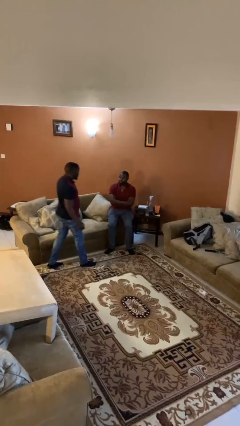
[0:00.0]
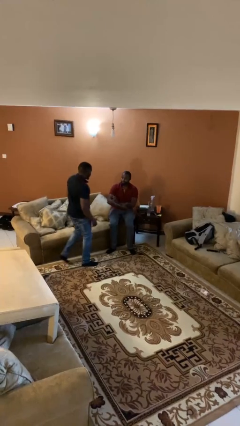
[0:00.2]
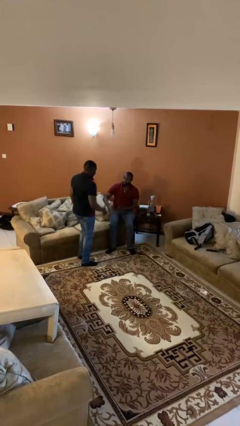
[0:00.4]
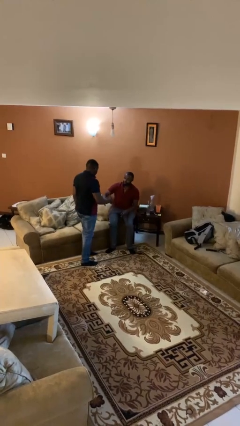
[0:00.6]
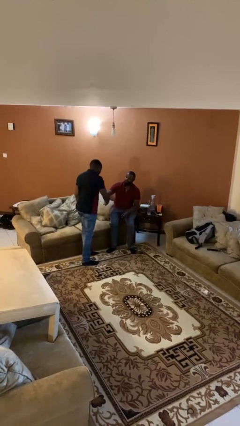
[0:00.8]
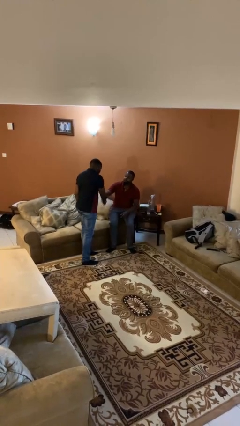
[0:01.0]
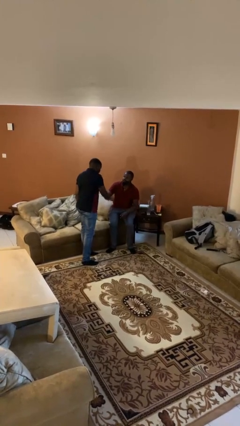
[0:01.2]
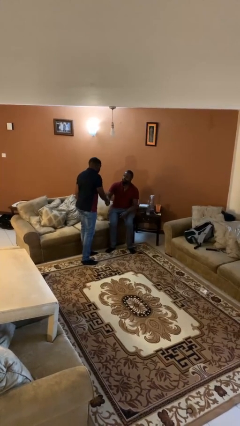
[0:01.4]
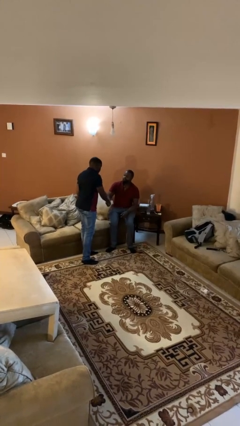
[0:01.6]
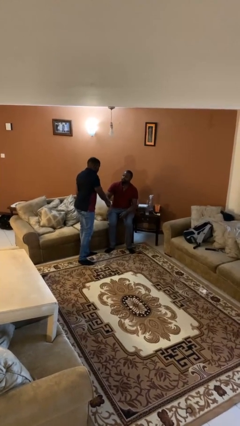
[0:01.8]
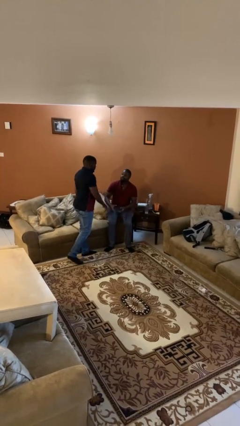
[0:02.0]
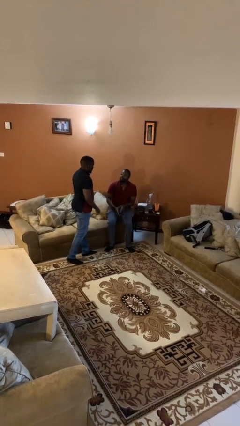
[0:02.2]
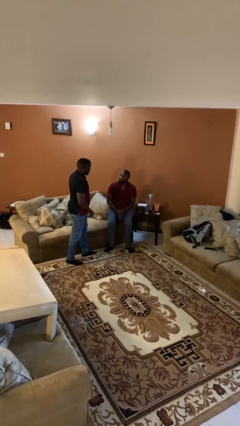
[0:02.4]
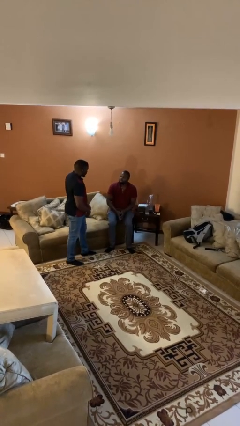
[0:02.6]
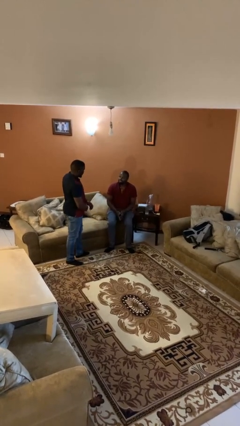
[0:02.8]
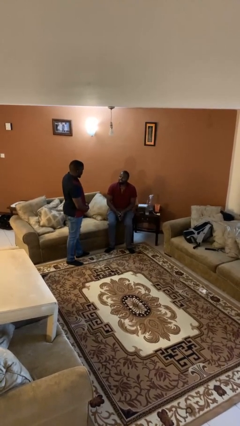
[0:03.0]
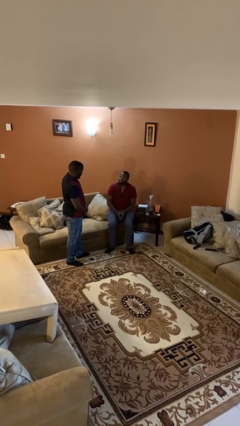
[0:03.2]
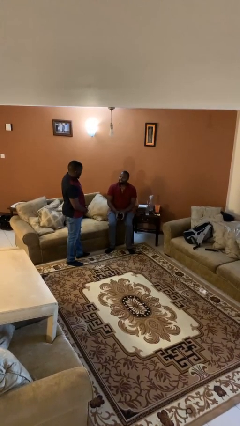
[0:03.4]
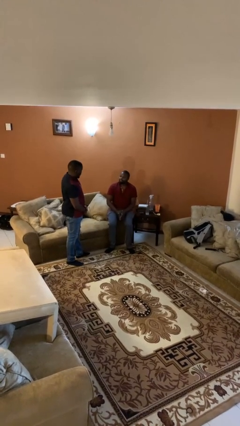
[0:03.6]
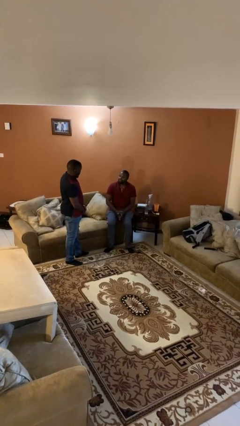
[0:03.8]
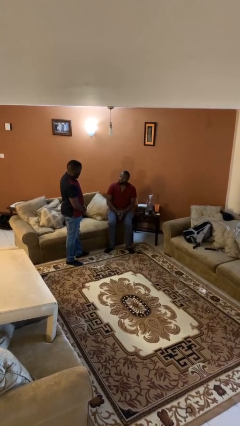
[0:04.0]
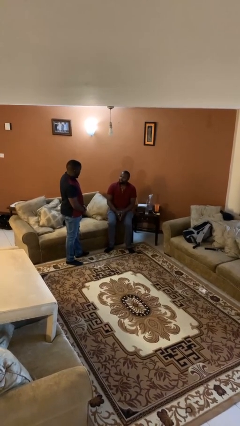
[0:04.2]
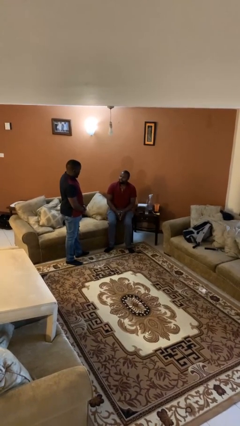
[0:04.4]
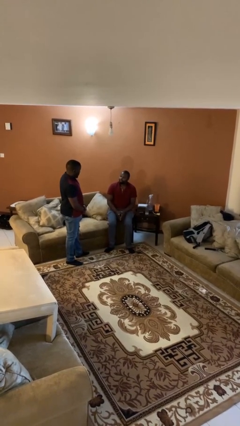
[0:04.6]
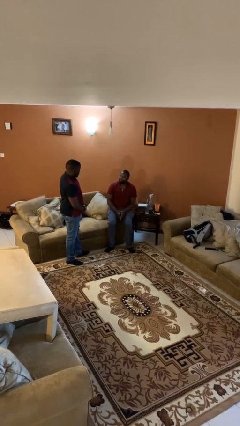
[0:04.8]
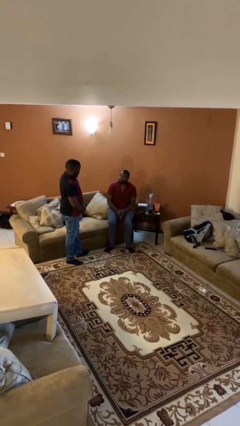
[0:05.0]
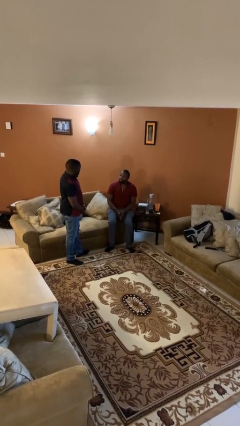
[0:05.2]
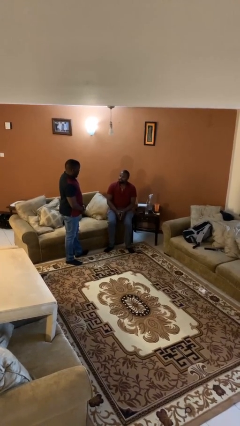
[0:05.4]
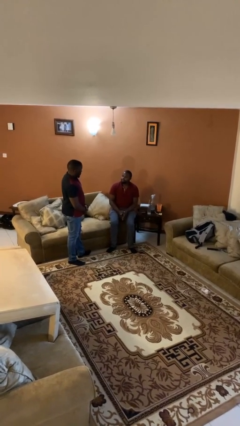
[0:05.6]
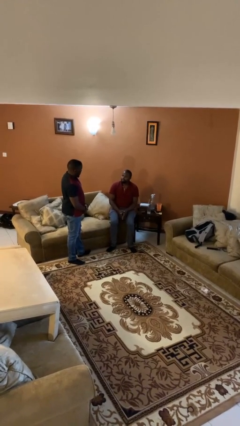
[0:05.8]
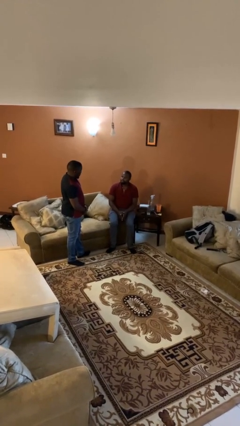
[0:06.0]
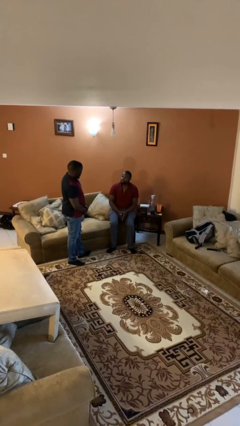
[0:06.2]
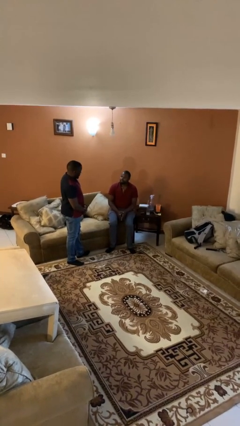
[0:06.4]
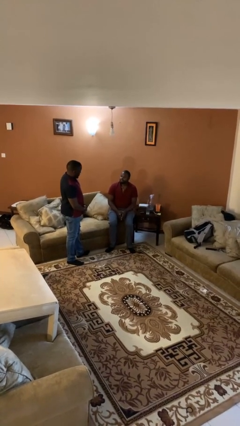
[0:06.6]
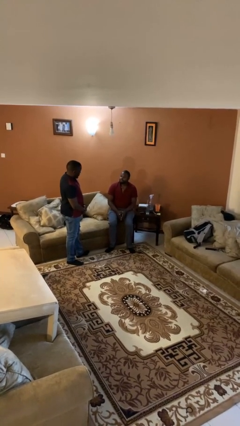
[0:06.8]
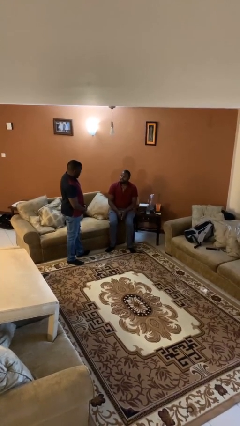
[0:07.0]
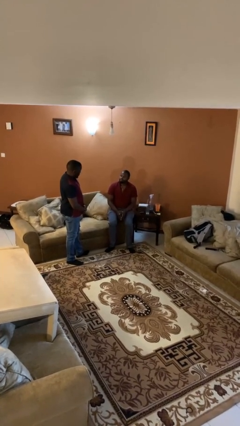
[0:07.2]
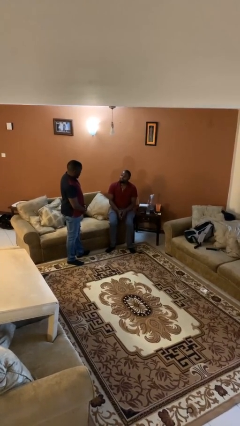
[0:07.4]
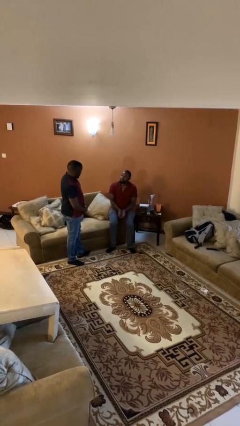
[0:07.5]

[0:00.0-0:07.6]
person shakes hand

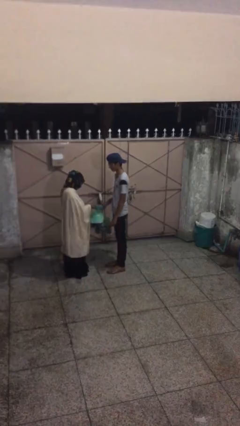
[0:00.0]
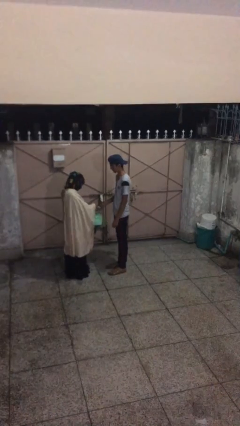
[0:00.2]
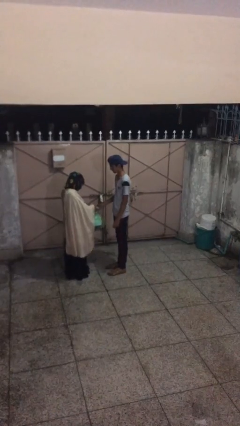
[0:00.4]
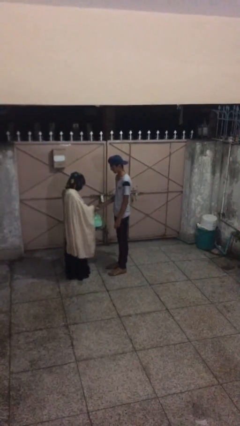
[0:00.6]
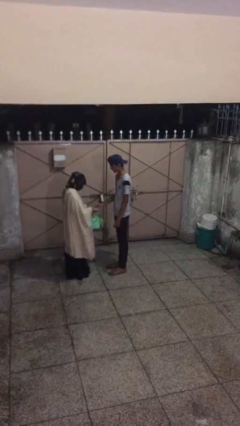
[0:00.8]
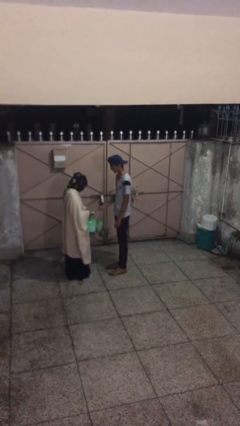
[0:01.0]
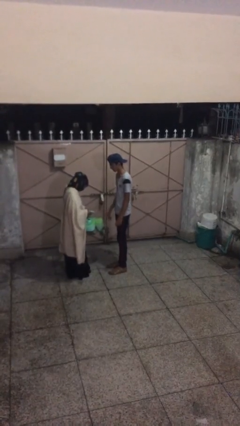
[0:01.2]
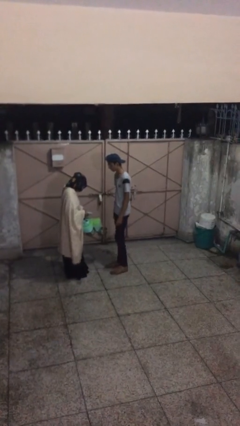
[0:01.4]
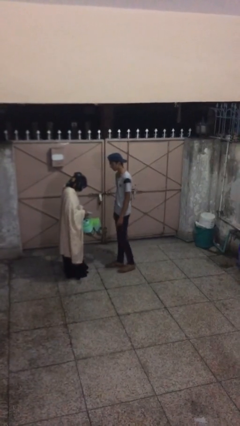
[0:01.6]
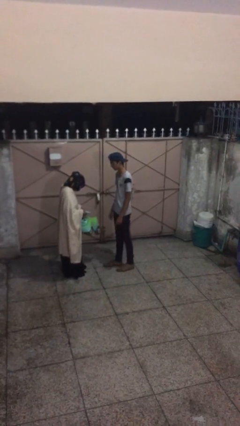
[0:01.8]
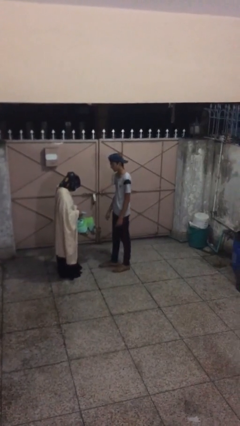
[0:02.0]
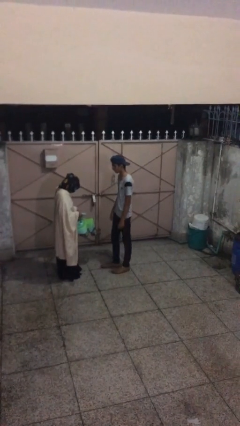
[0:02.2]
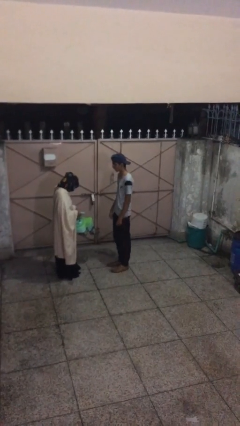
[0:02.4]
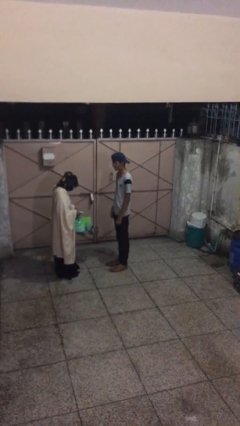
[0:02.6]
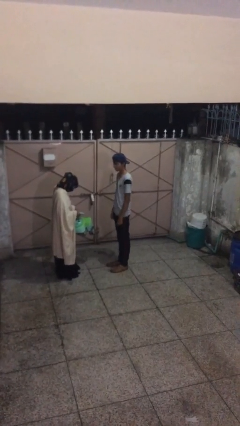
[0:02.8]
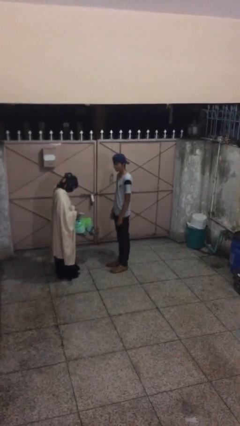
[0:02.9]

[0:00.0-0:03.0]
person transfers object to person

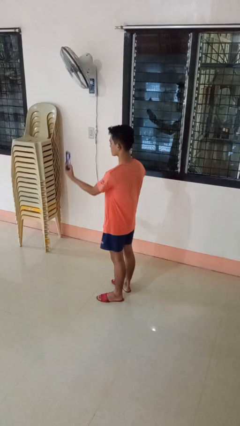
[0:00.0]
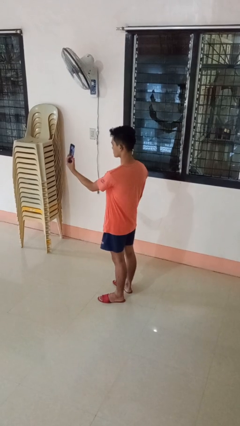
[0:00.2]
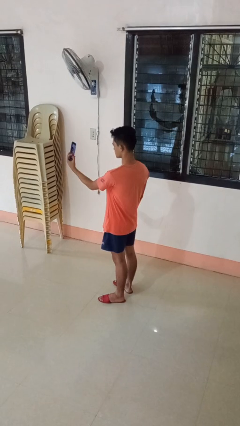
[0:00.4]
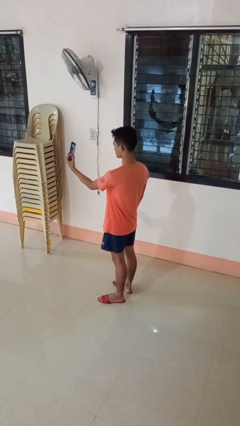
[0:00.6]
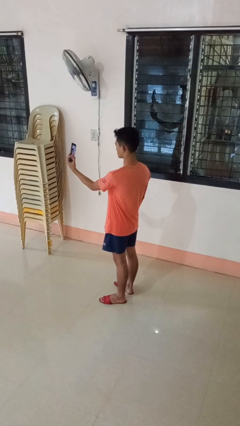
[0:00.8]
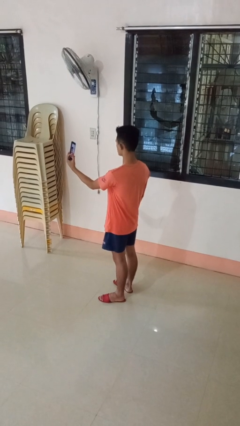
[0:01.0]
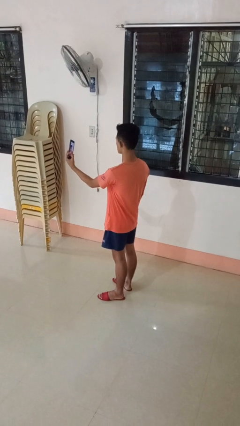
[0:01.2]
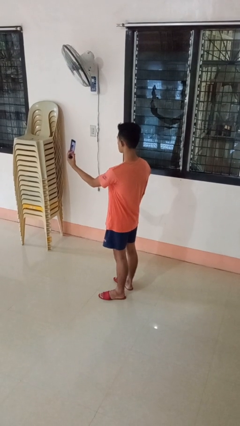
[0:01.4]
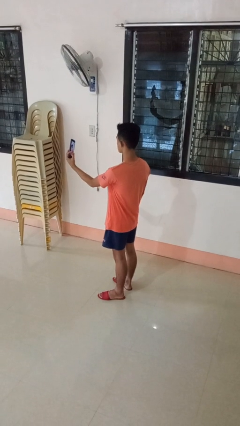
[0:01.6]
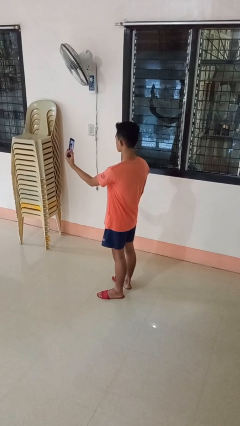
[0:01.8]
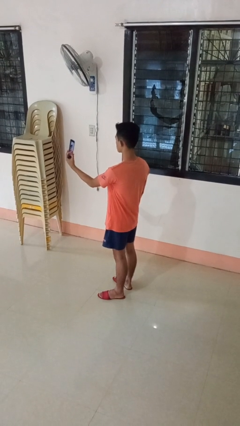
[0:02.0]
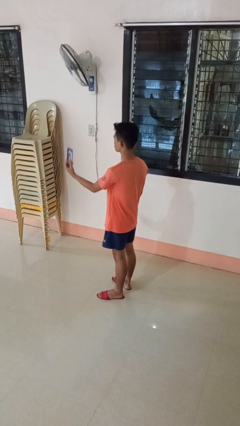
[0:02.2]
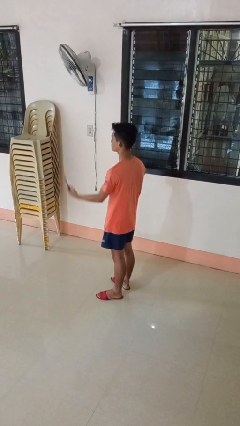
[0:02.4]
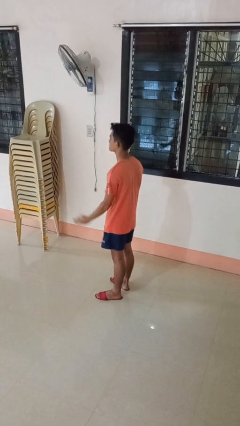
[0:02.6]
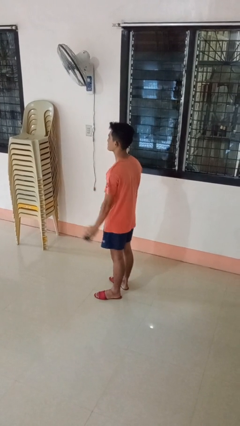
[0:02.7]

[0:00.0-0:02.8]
person takes selfie

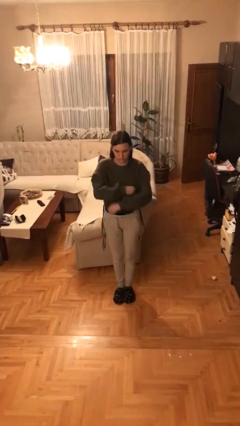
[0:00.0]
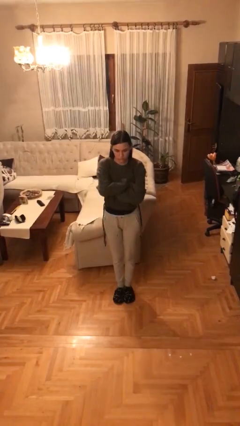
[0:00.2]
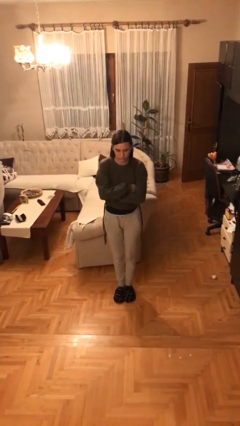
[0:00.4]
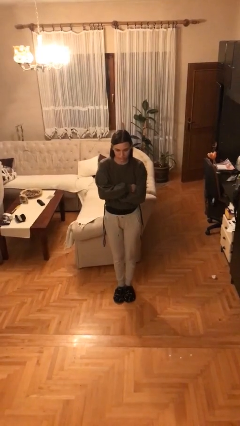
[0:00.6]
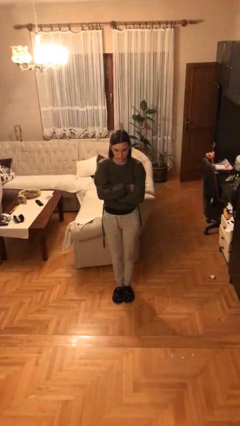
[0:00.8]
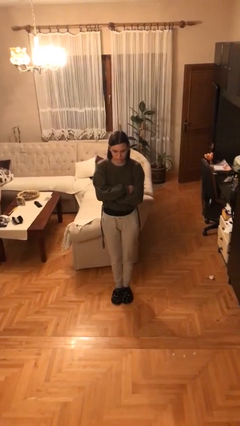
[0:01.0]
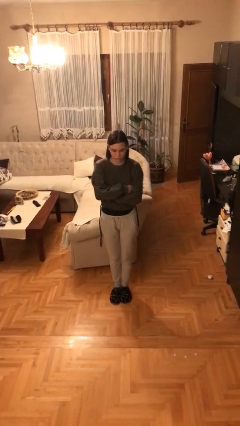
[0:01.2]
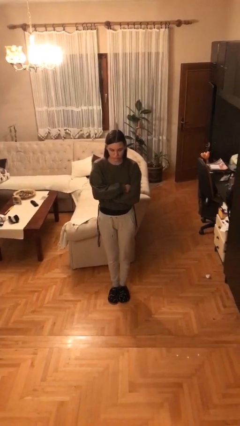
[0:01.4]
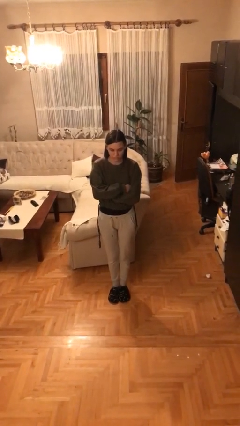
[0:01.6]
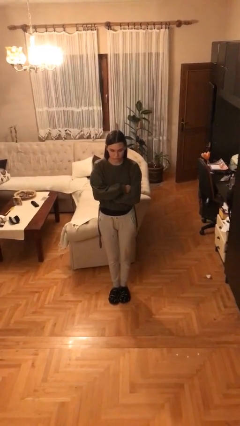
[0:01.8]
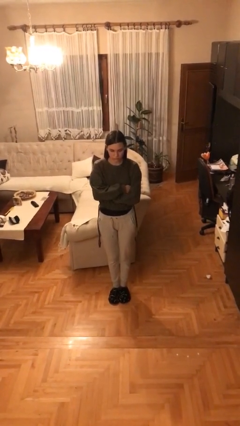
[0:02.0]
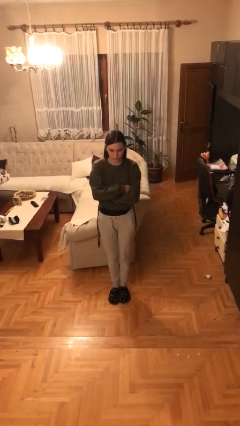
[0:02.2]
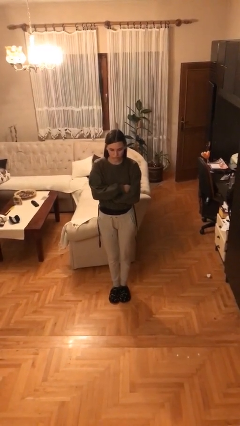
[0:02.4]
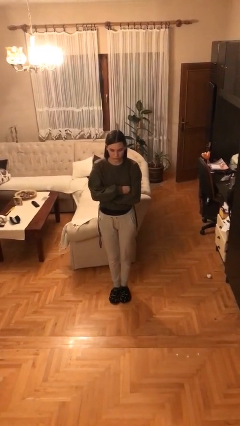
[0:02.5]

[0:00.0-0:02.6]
person crosses arms

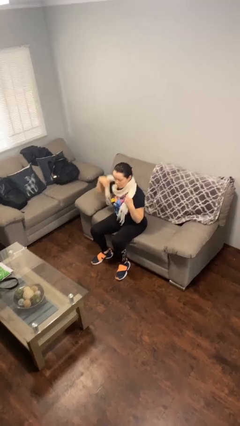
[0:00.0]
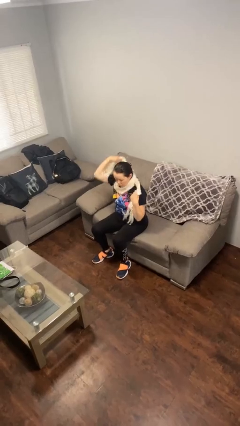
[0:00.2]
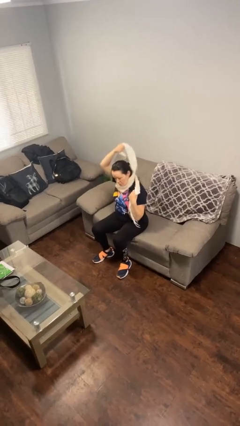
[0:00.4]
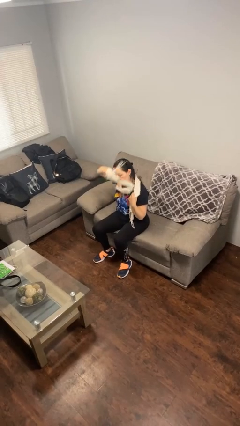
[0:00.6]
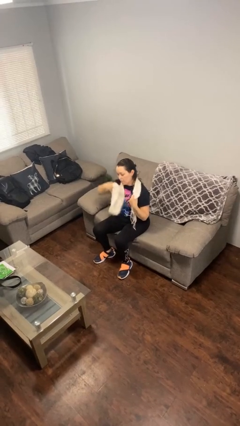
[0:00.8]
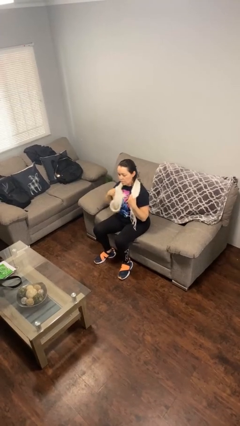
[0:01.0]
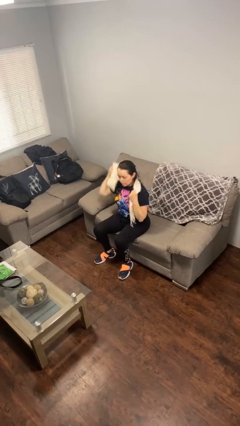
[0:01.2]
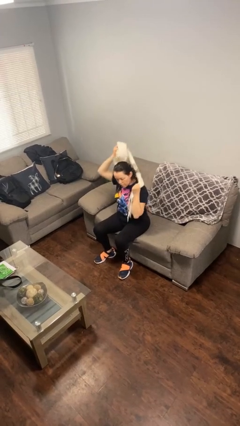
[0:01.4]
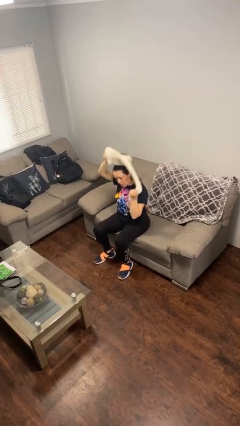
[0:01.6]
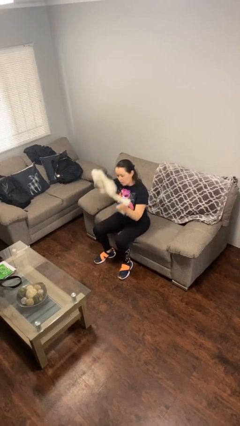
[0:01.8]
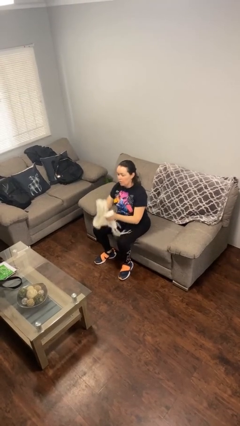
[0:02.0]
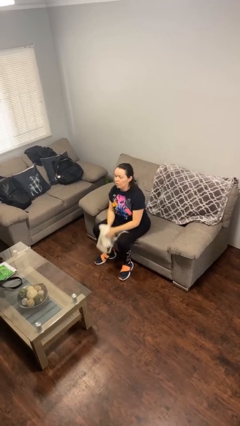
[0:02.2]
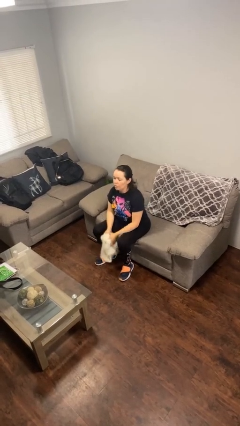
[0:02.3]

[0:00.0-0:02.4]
person takes off scarf
